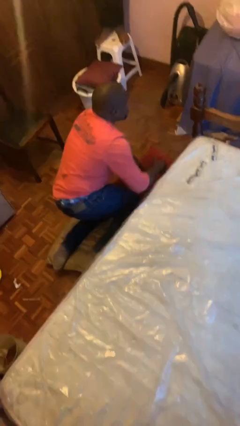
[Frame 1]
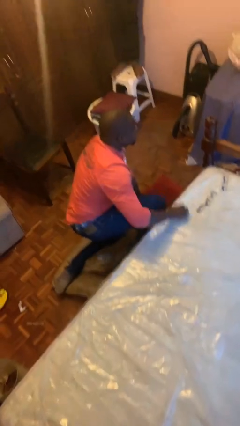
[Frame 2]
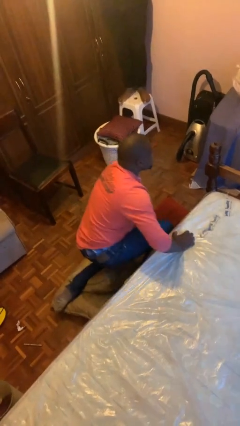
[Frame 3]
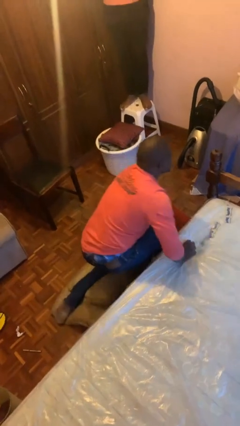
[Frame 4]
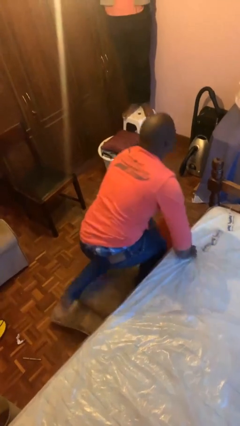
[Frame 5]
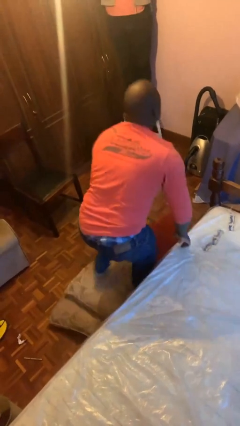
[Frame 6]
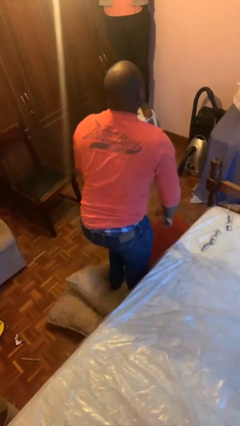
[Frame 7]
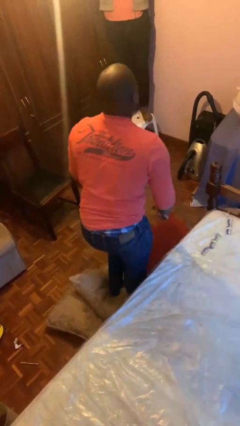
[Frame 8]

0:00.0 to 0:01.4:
person falls from bed

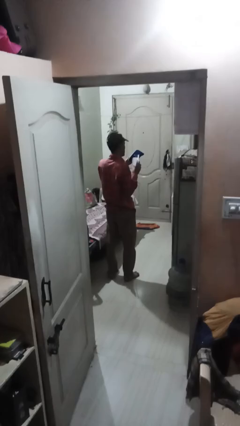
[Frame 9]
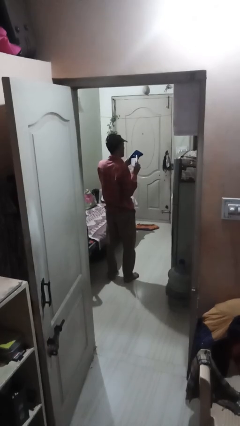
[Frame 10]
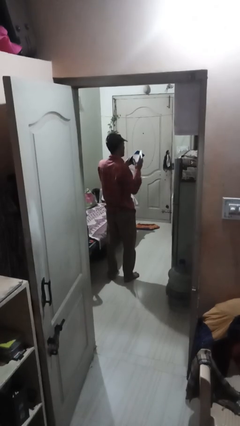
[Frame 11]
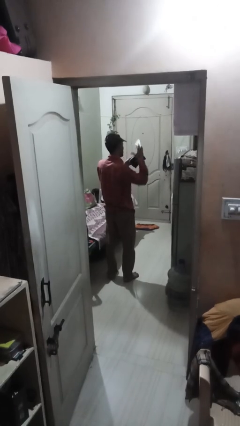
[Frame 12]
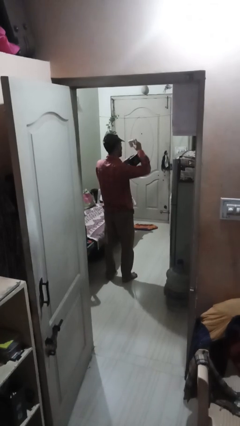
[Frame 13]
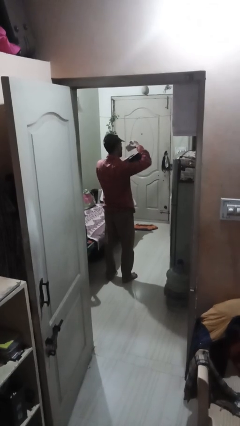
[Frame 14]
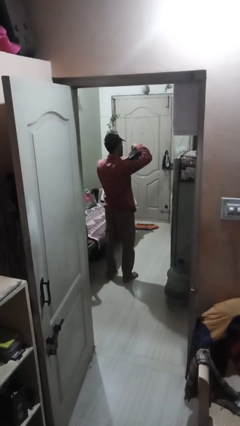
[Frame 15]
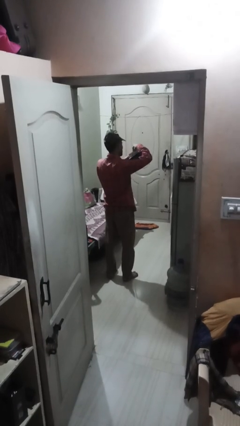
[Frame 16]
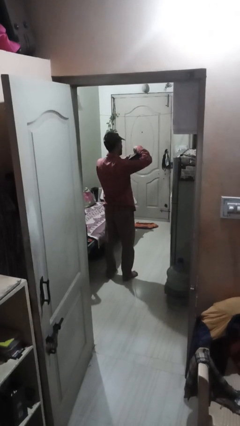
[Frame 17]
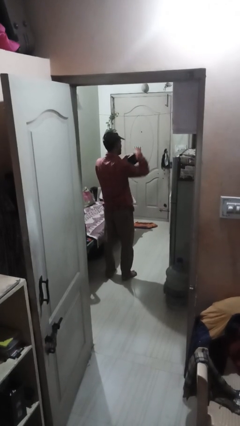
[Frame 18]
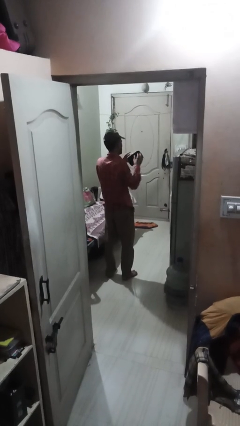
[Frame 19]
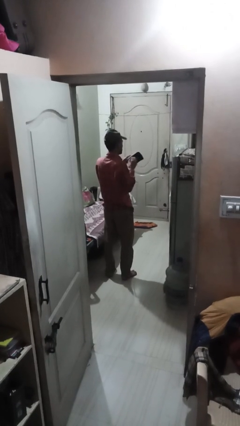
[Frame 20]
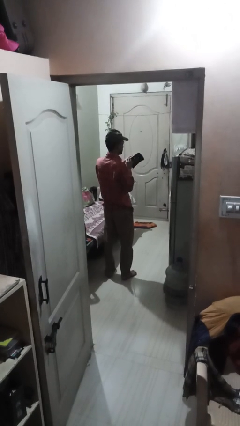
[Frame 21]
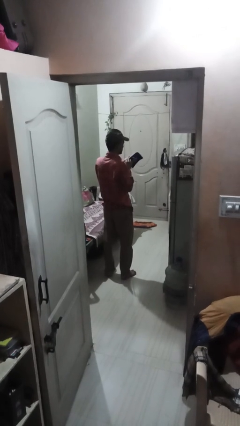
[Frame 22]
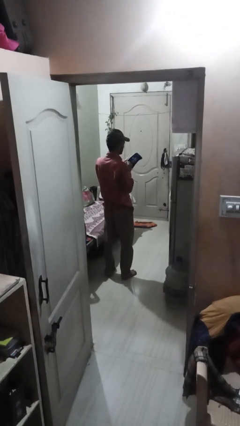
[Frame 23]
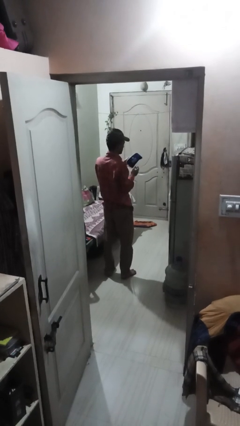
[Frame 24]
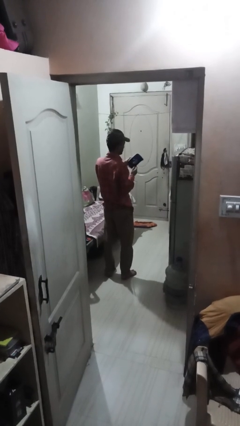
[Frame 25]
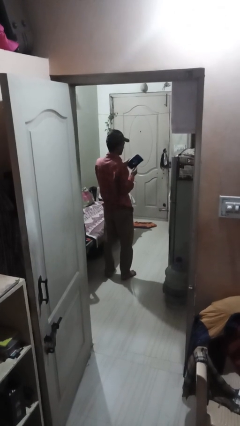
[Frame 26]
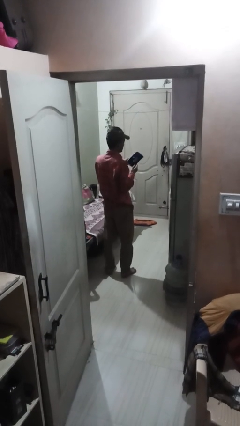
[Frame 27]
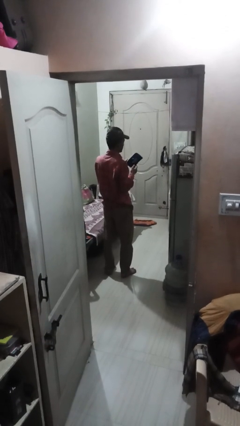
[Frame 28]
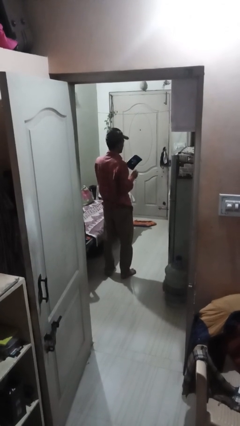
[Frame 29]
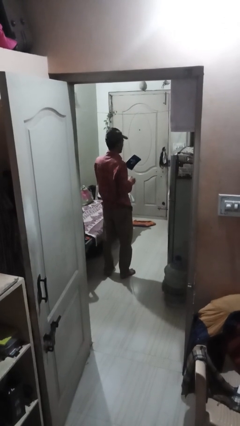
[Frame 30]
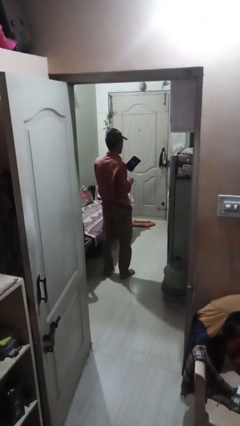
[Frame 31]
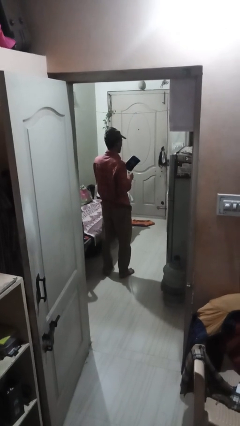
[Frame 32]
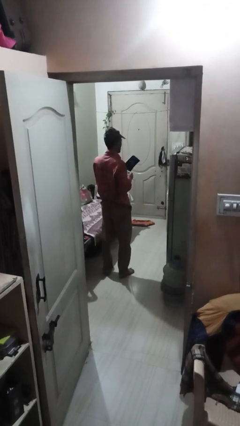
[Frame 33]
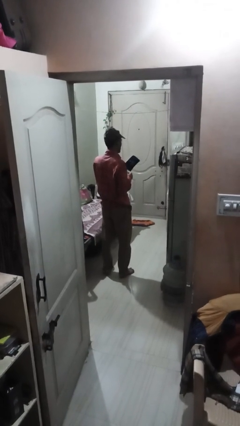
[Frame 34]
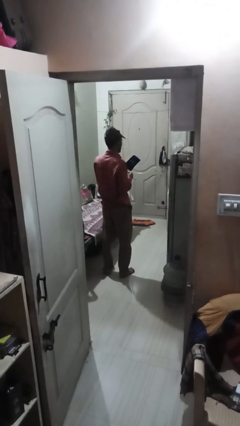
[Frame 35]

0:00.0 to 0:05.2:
person puts object into purse

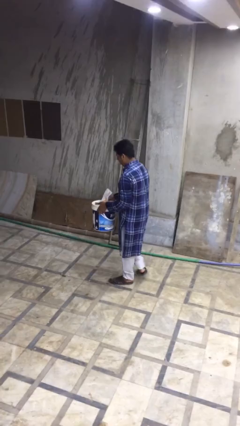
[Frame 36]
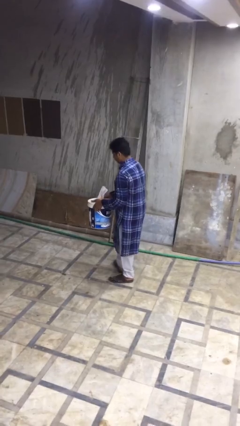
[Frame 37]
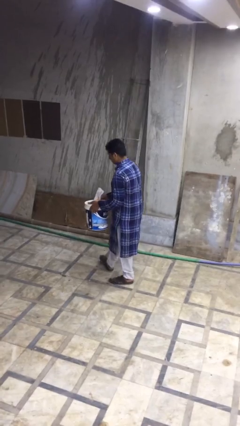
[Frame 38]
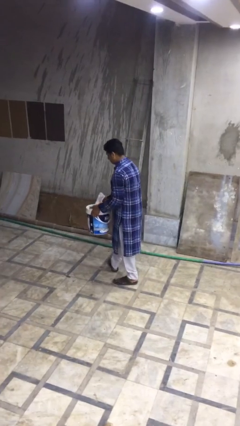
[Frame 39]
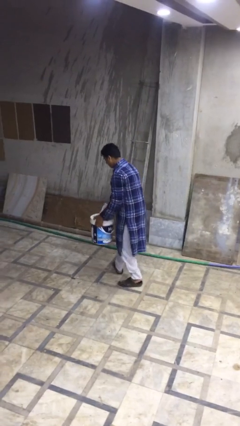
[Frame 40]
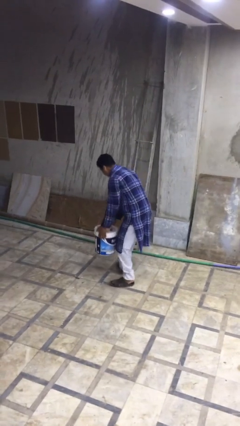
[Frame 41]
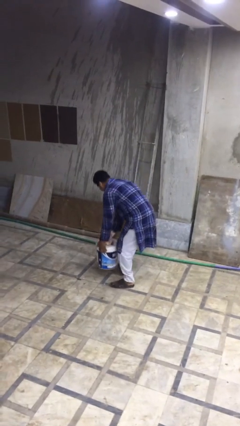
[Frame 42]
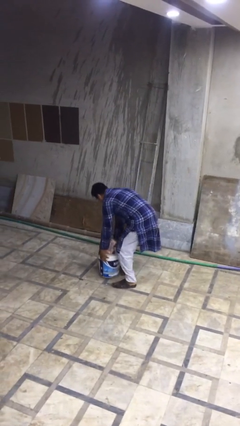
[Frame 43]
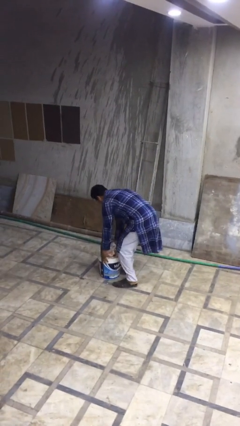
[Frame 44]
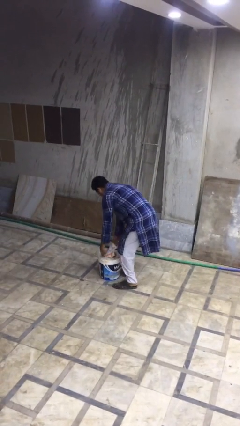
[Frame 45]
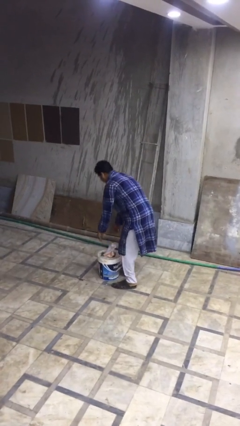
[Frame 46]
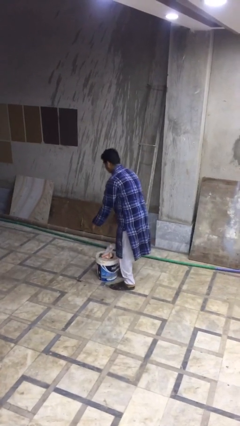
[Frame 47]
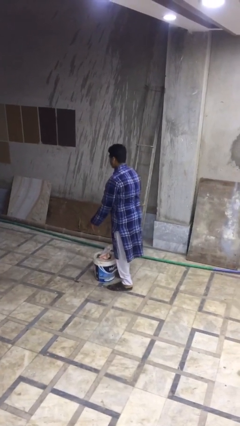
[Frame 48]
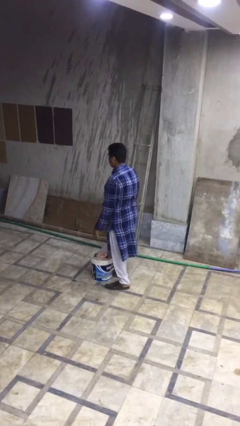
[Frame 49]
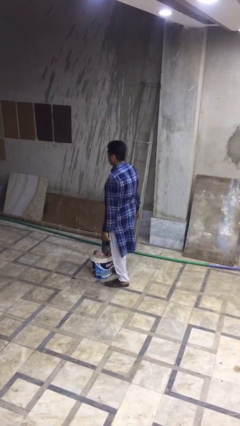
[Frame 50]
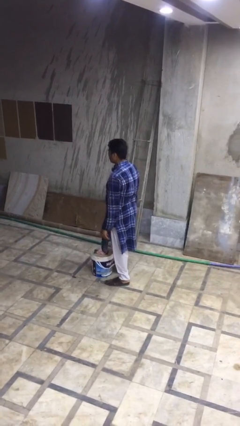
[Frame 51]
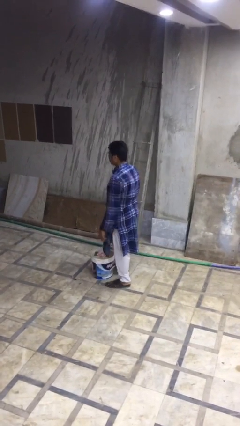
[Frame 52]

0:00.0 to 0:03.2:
person puts down object on floor

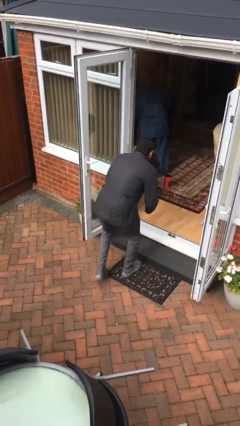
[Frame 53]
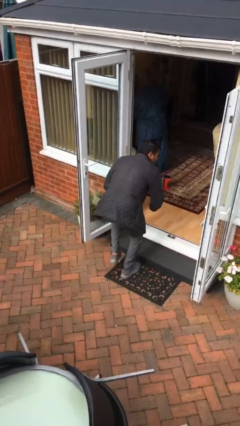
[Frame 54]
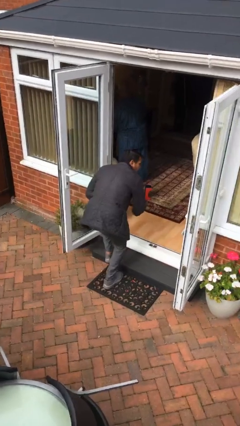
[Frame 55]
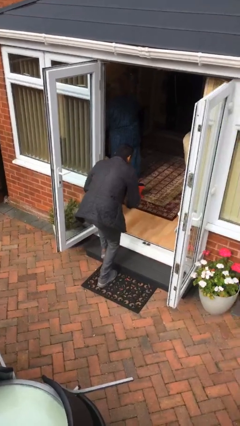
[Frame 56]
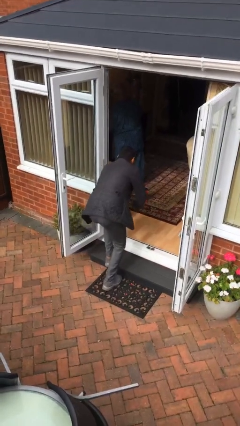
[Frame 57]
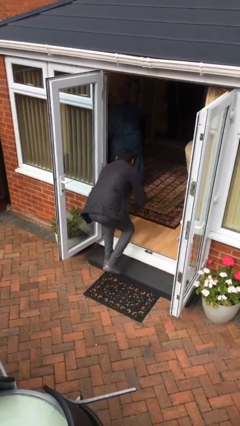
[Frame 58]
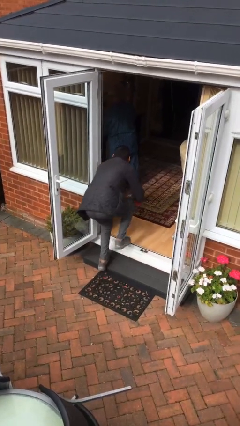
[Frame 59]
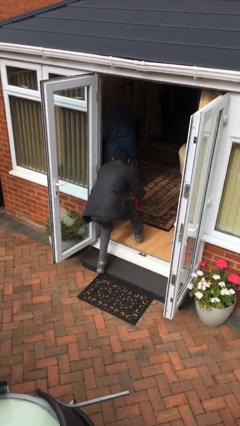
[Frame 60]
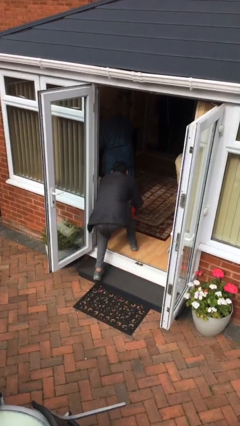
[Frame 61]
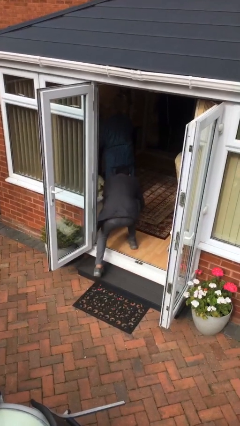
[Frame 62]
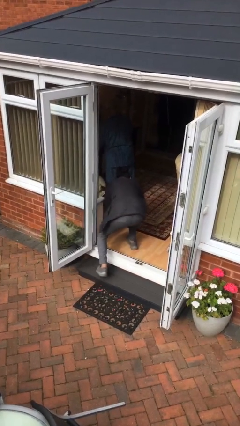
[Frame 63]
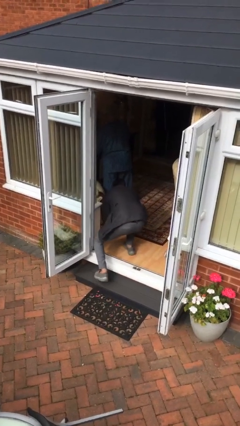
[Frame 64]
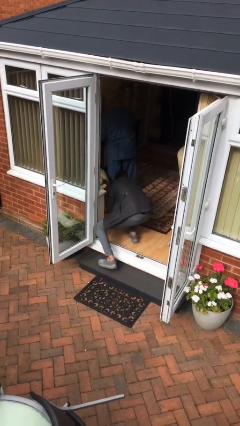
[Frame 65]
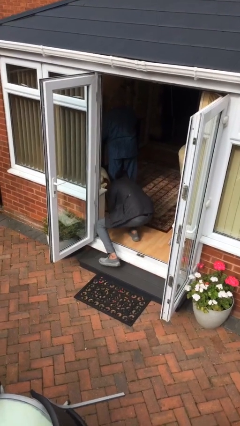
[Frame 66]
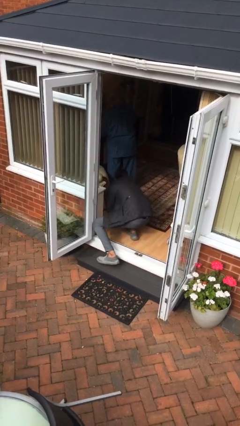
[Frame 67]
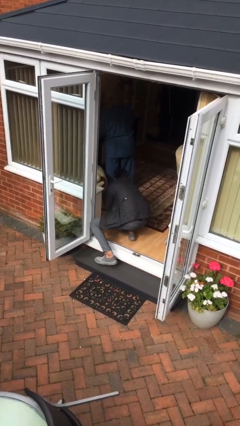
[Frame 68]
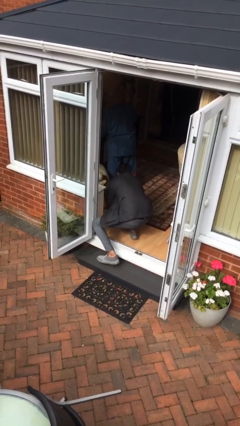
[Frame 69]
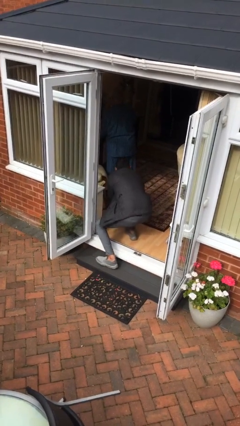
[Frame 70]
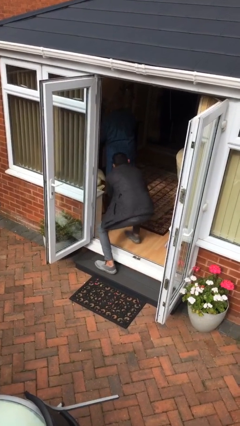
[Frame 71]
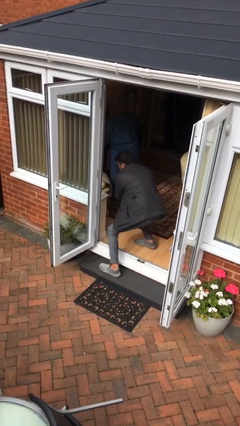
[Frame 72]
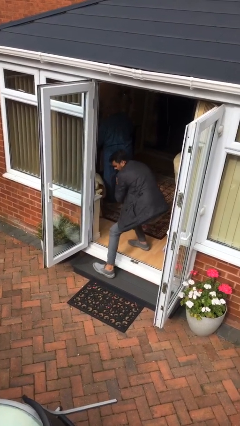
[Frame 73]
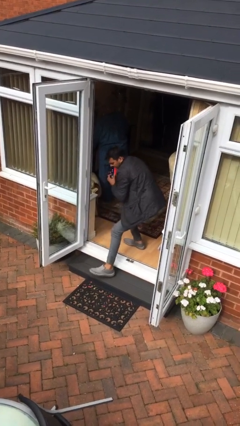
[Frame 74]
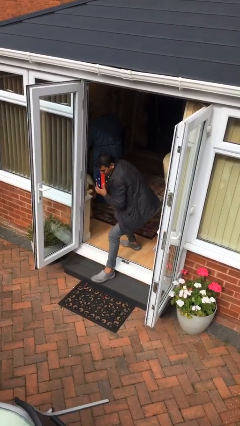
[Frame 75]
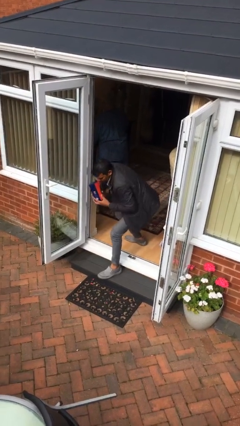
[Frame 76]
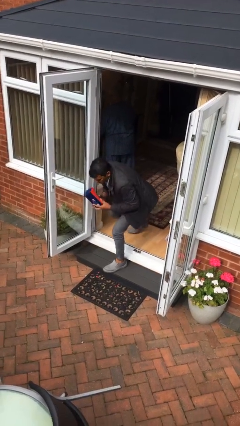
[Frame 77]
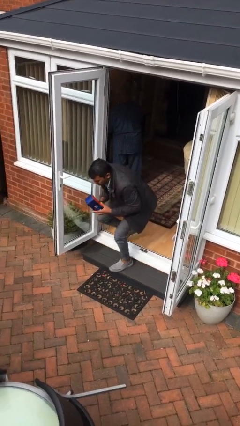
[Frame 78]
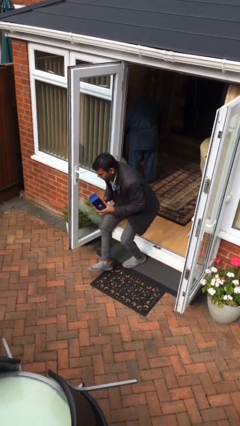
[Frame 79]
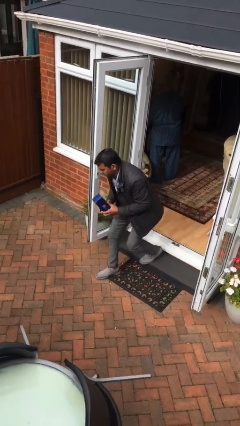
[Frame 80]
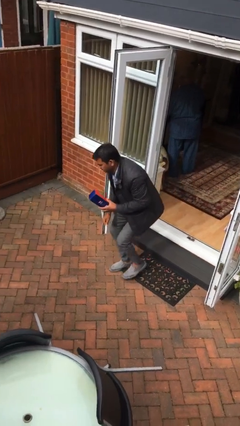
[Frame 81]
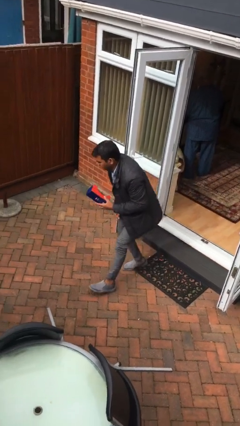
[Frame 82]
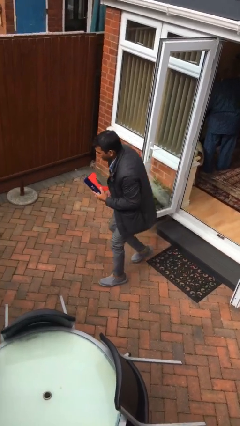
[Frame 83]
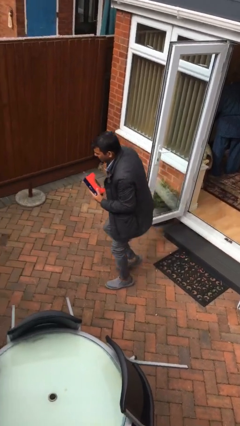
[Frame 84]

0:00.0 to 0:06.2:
person steals object from person

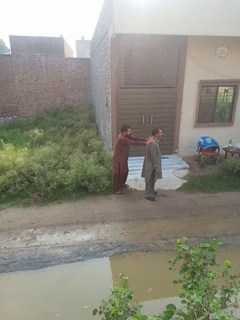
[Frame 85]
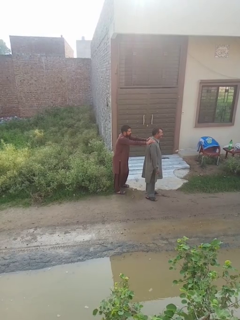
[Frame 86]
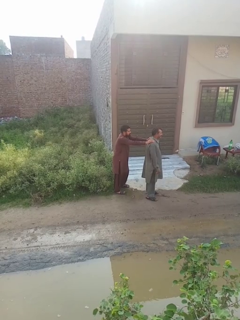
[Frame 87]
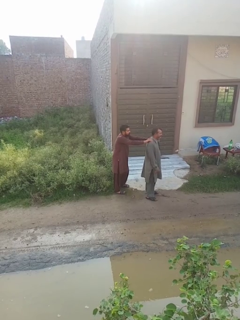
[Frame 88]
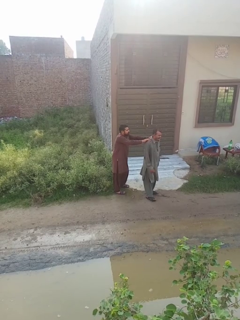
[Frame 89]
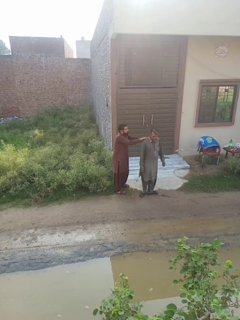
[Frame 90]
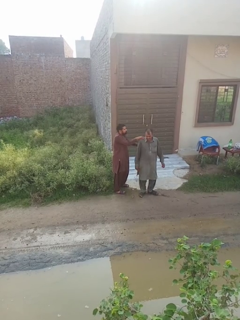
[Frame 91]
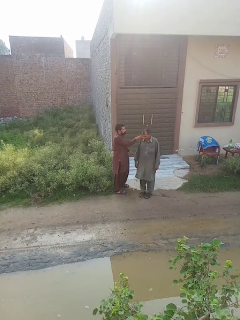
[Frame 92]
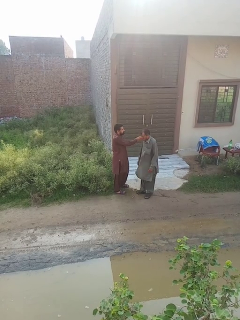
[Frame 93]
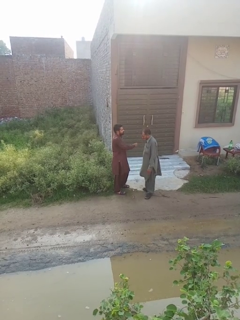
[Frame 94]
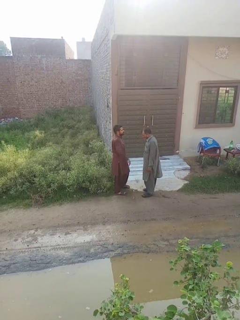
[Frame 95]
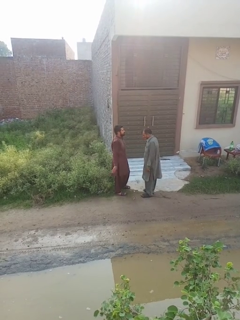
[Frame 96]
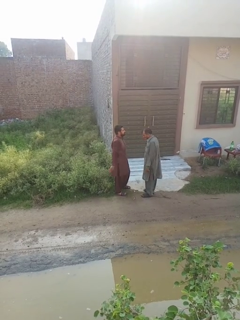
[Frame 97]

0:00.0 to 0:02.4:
person spins person around
